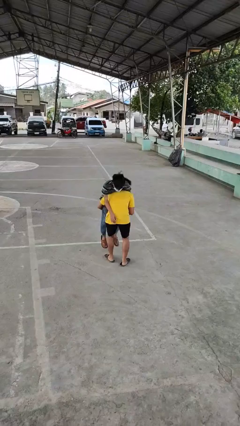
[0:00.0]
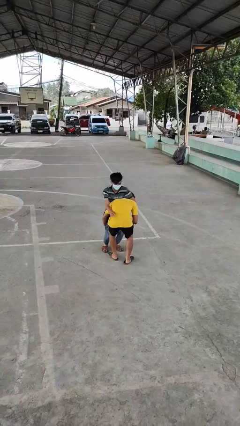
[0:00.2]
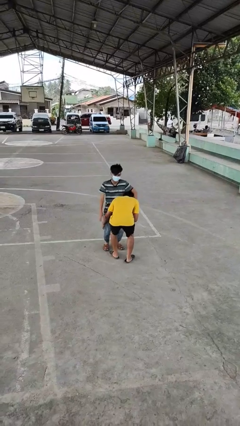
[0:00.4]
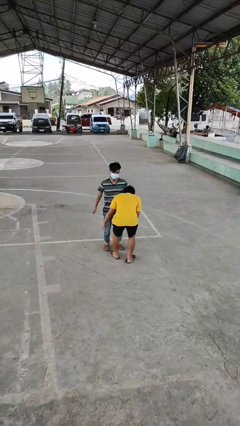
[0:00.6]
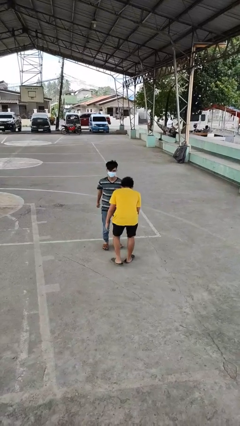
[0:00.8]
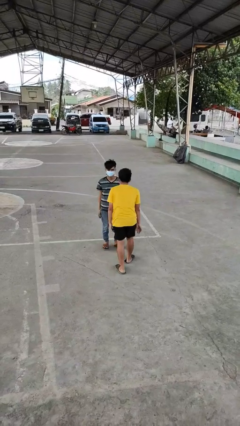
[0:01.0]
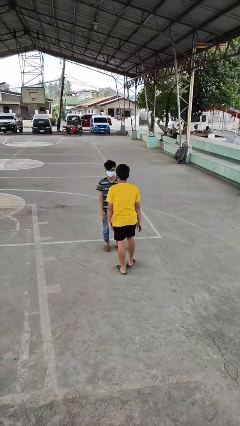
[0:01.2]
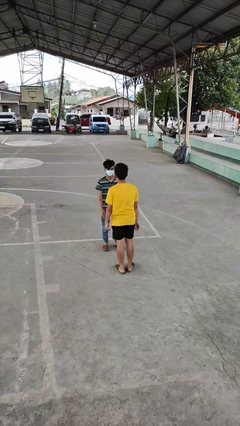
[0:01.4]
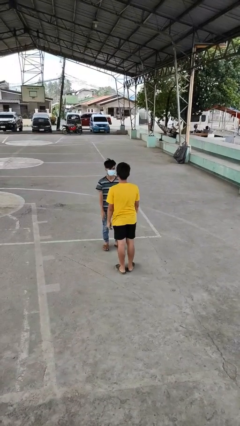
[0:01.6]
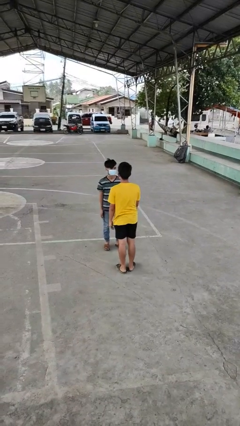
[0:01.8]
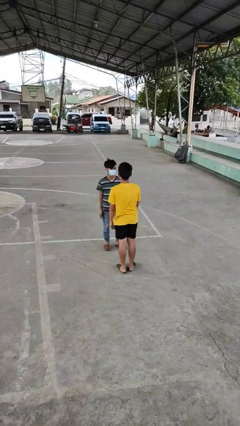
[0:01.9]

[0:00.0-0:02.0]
person puts down person

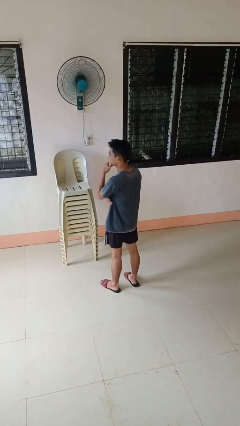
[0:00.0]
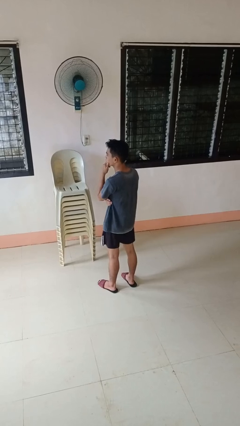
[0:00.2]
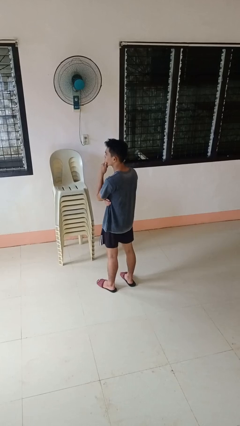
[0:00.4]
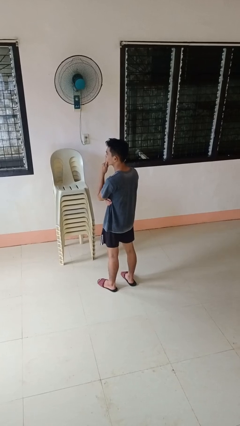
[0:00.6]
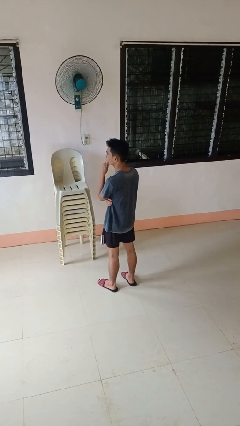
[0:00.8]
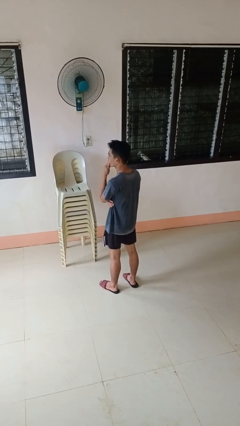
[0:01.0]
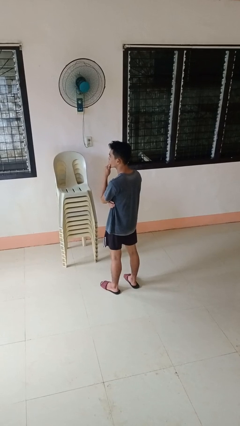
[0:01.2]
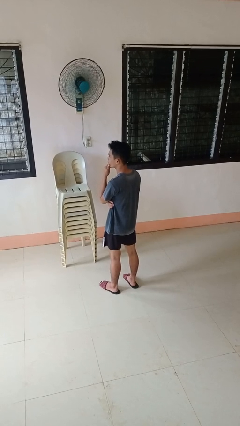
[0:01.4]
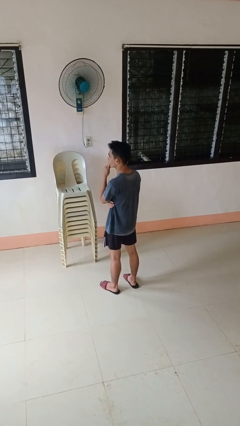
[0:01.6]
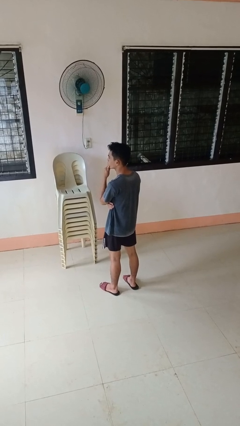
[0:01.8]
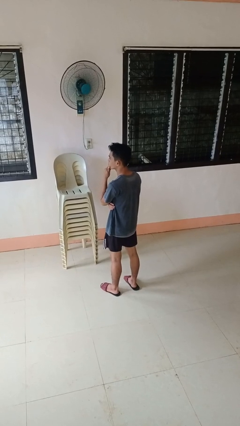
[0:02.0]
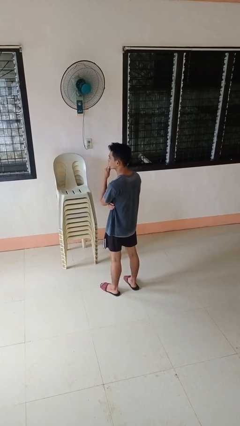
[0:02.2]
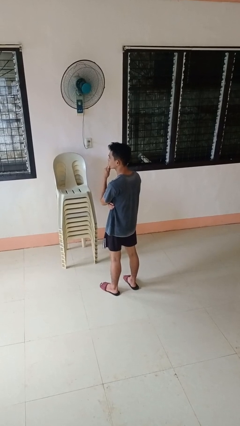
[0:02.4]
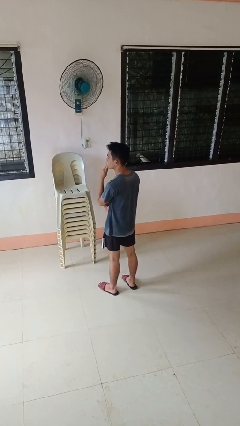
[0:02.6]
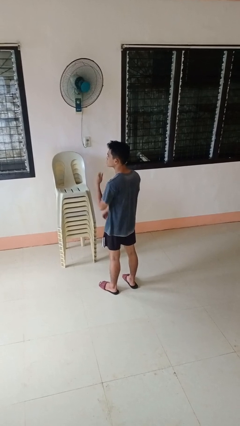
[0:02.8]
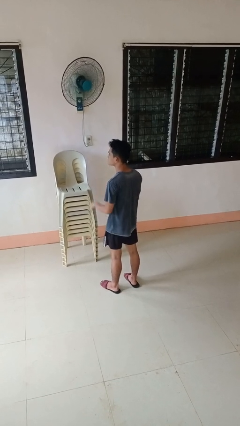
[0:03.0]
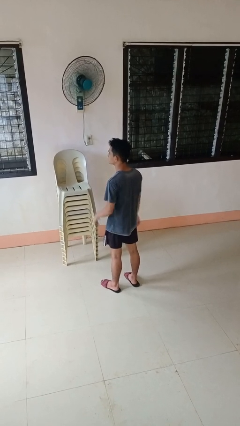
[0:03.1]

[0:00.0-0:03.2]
person strokes chin

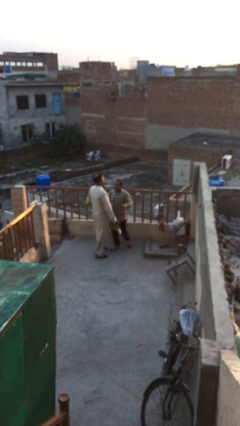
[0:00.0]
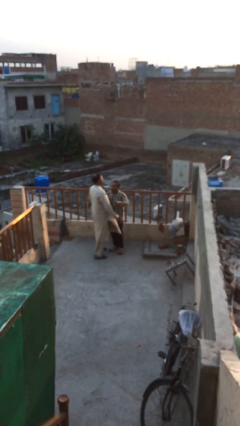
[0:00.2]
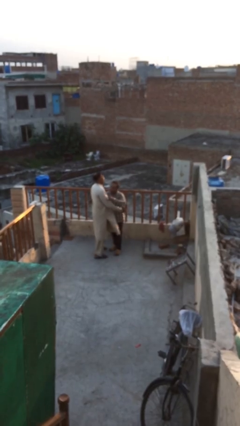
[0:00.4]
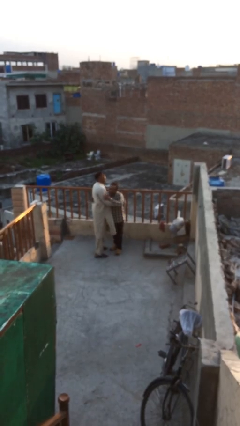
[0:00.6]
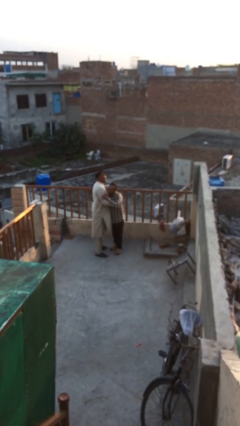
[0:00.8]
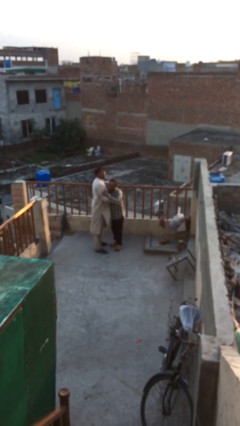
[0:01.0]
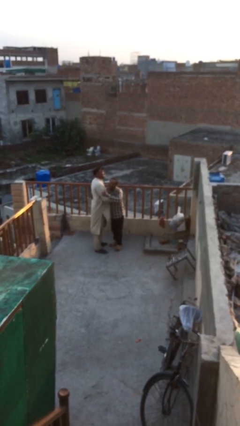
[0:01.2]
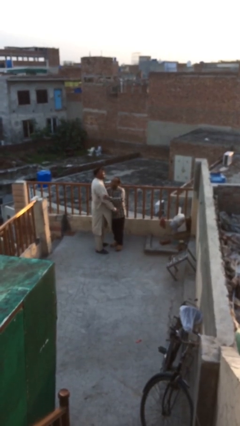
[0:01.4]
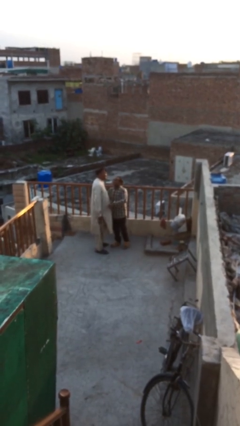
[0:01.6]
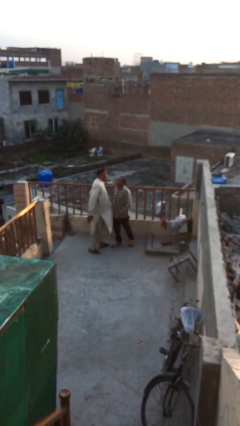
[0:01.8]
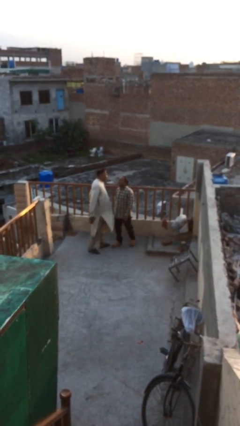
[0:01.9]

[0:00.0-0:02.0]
person embraces person

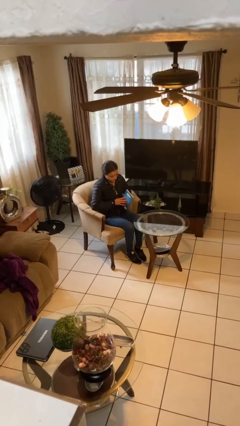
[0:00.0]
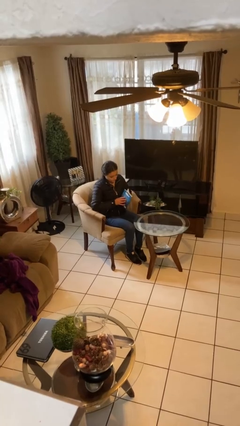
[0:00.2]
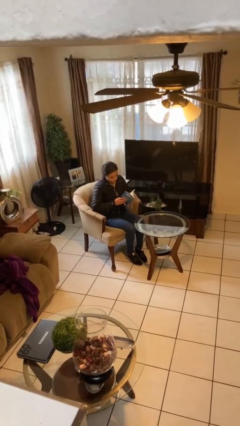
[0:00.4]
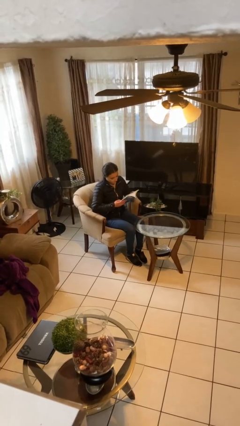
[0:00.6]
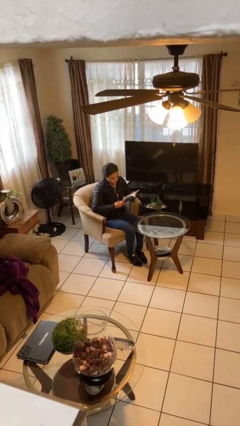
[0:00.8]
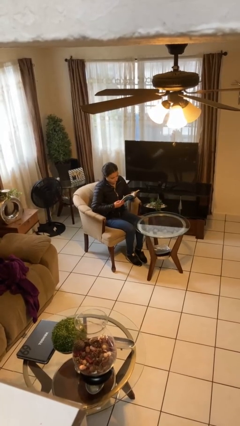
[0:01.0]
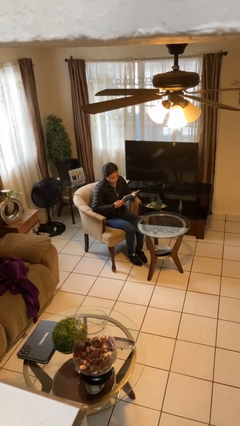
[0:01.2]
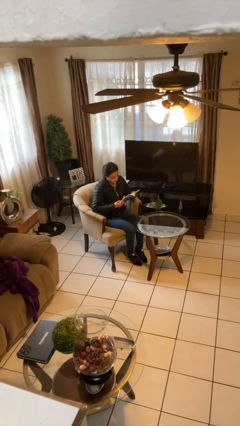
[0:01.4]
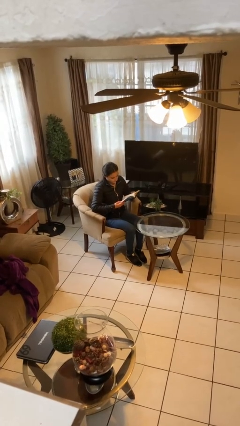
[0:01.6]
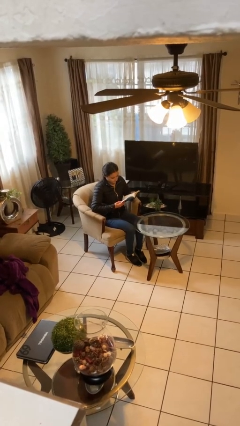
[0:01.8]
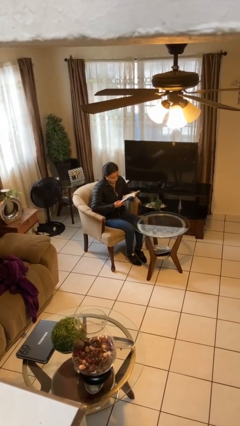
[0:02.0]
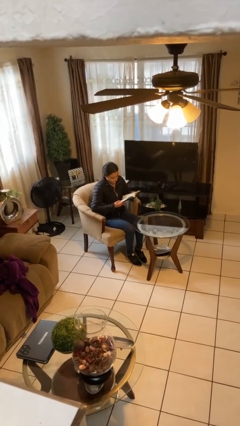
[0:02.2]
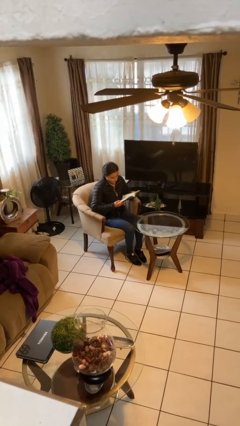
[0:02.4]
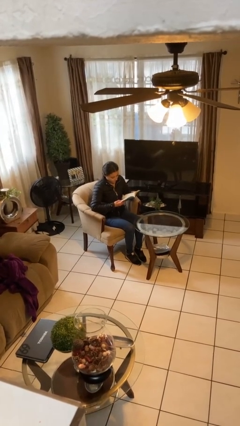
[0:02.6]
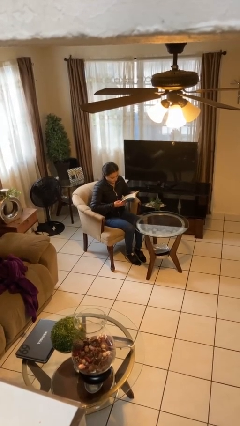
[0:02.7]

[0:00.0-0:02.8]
person reads document

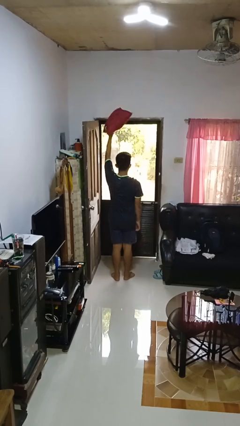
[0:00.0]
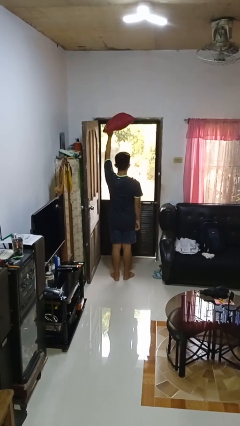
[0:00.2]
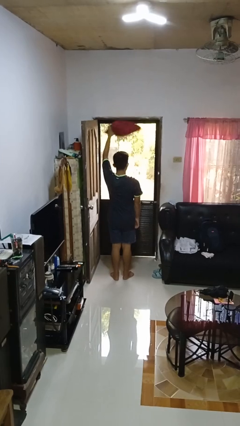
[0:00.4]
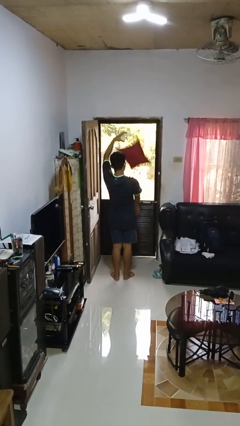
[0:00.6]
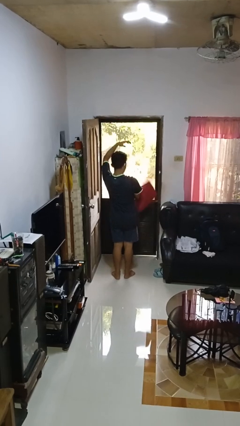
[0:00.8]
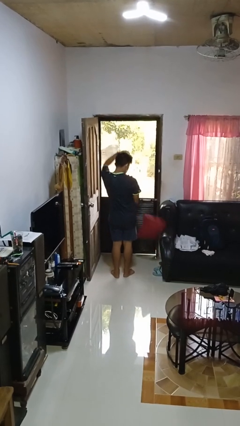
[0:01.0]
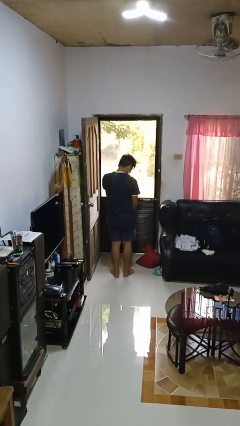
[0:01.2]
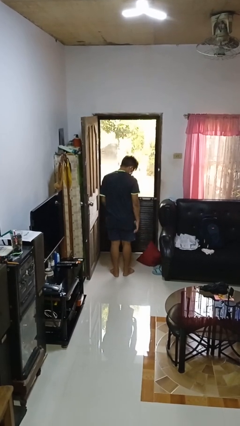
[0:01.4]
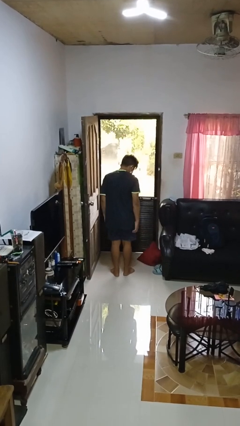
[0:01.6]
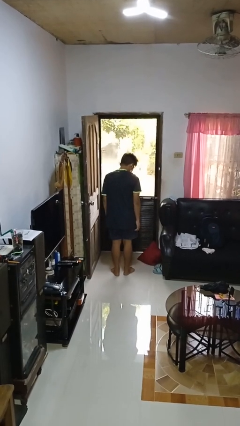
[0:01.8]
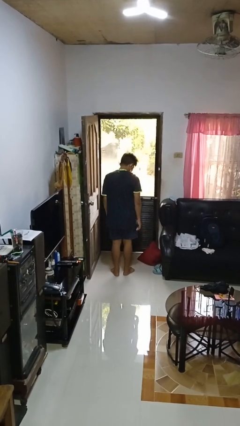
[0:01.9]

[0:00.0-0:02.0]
person drops object

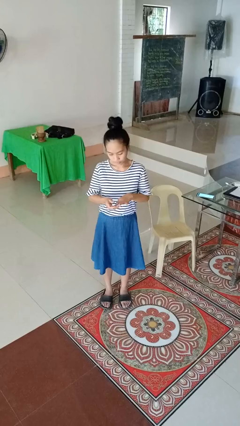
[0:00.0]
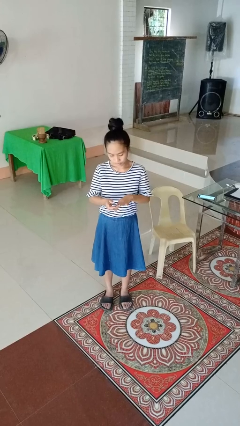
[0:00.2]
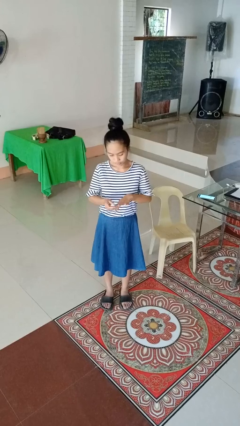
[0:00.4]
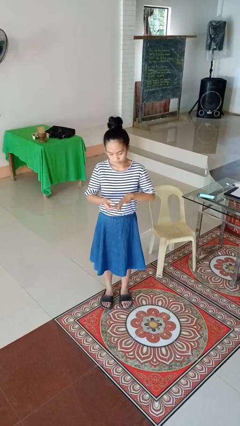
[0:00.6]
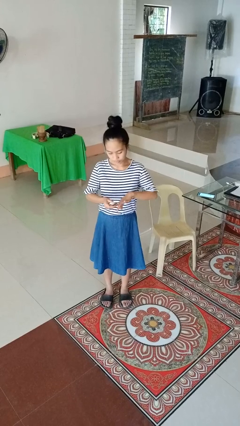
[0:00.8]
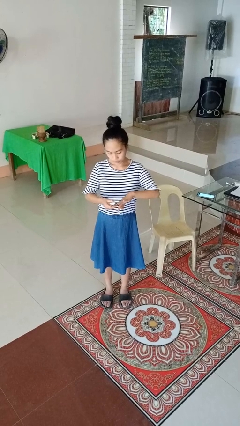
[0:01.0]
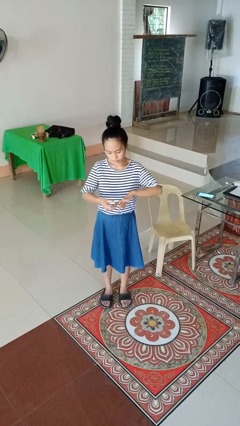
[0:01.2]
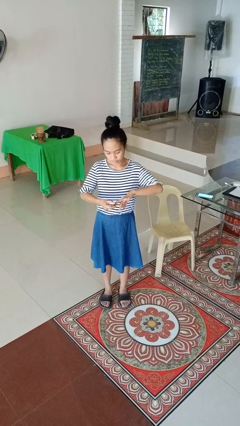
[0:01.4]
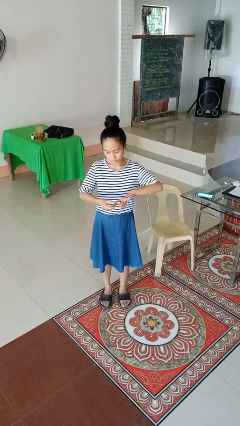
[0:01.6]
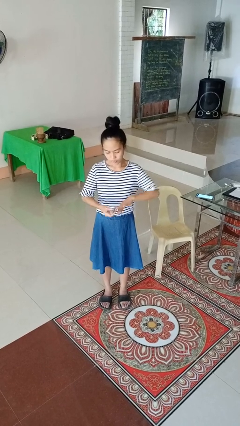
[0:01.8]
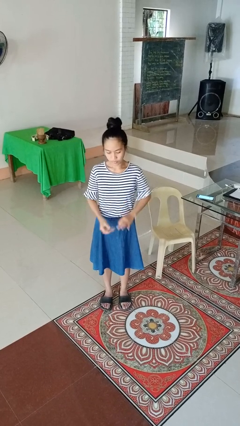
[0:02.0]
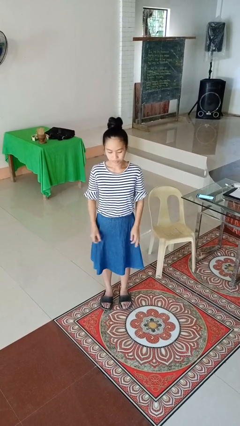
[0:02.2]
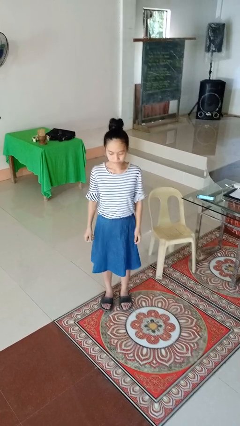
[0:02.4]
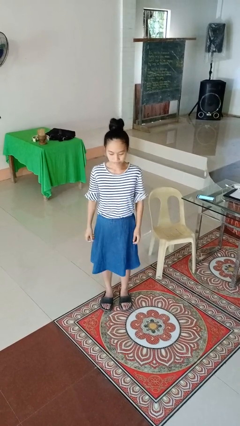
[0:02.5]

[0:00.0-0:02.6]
person clips fingernails

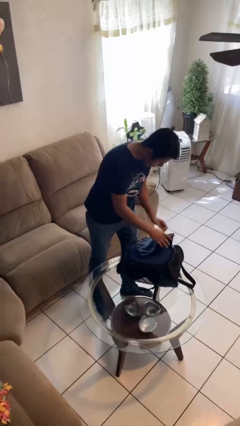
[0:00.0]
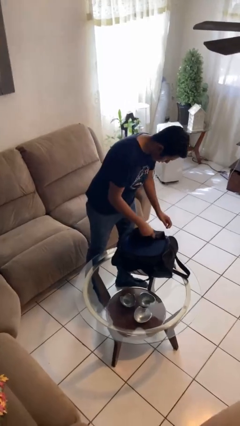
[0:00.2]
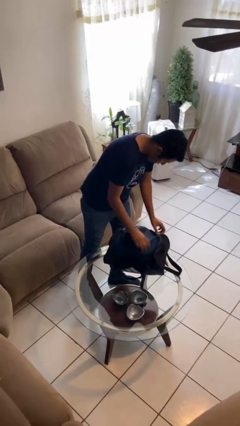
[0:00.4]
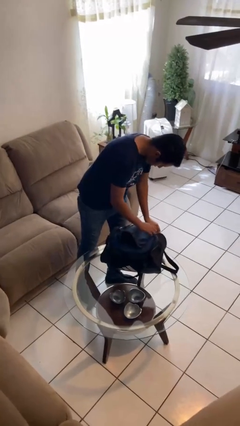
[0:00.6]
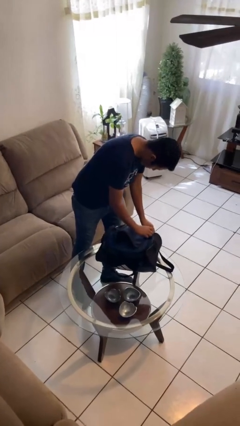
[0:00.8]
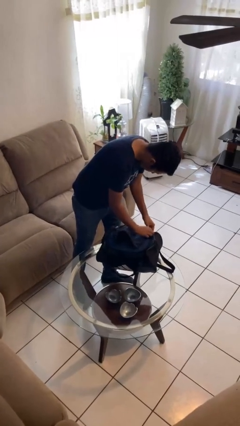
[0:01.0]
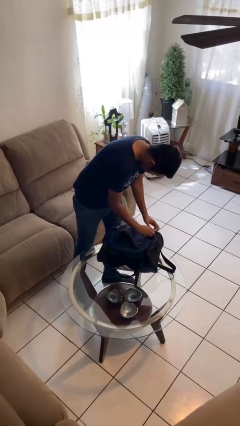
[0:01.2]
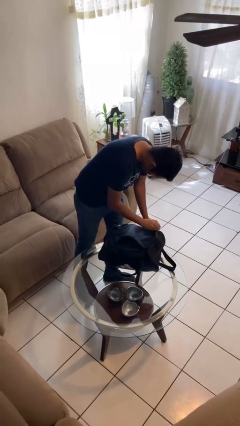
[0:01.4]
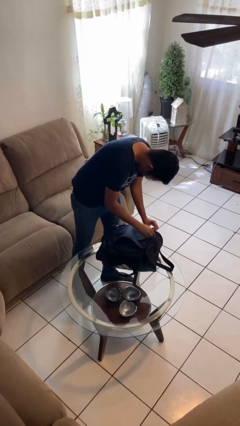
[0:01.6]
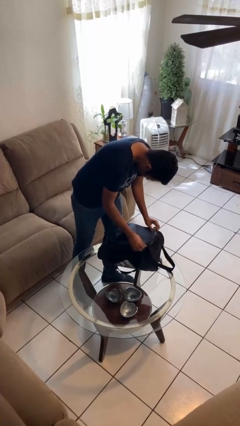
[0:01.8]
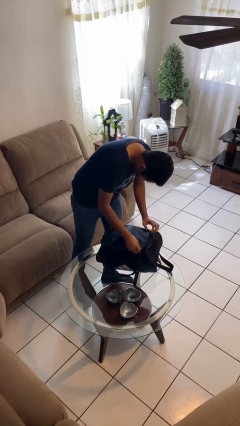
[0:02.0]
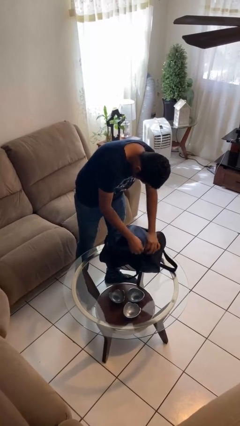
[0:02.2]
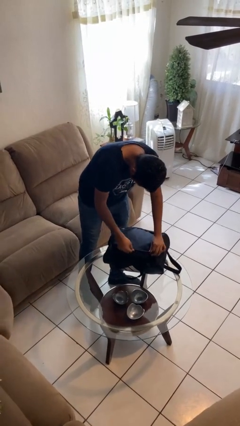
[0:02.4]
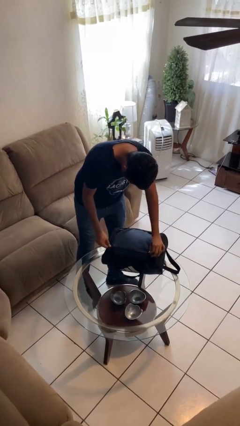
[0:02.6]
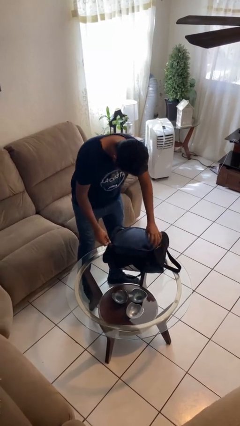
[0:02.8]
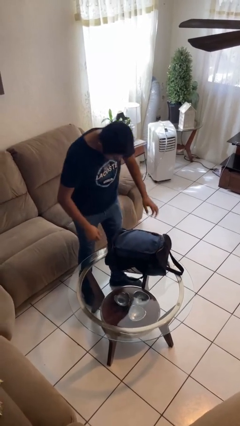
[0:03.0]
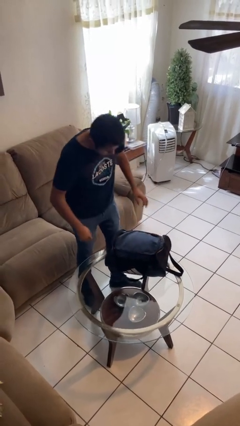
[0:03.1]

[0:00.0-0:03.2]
person closes suitcase
